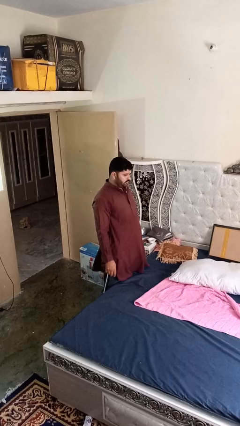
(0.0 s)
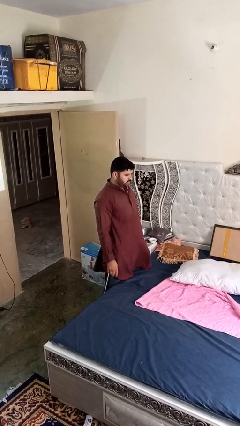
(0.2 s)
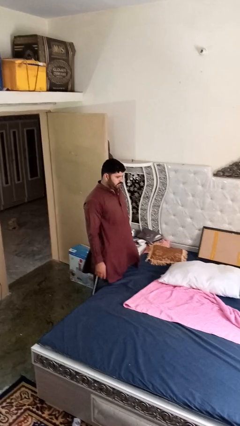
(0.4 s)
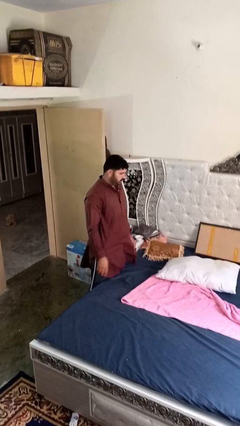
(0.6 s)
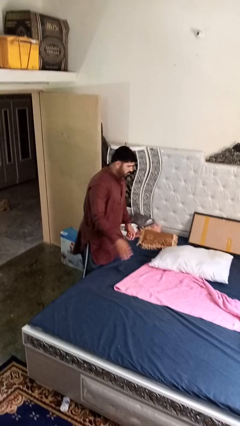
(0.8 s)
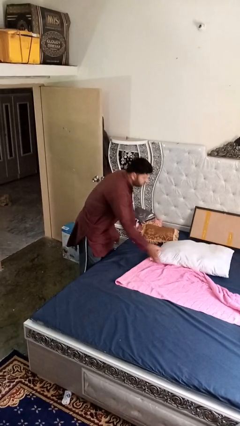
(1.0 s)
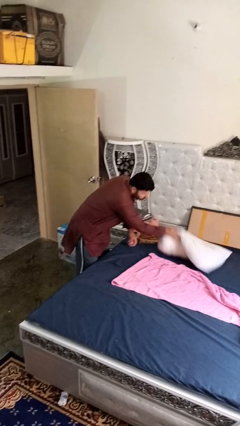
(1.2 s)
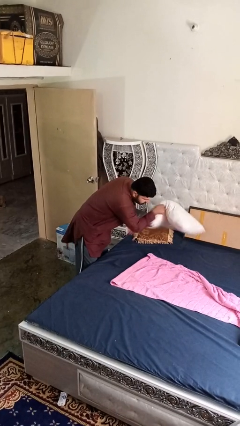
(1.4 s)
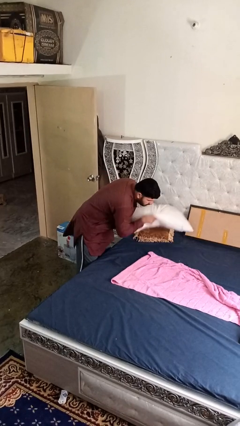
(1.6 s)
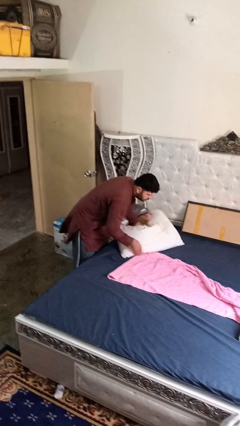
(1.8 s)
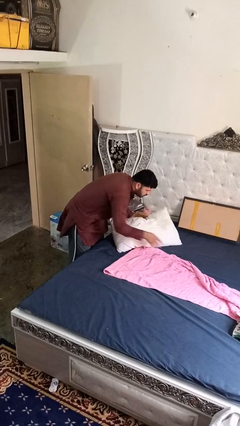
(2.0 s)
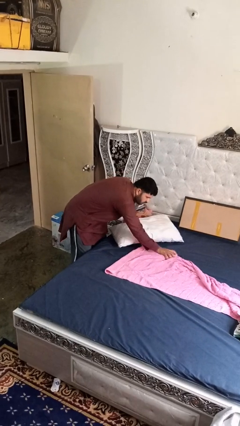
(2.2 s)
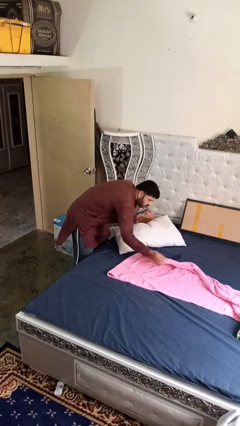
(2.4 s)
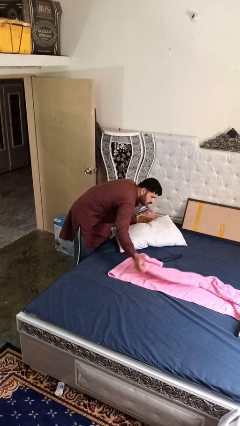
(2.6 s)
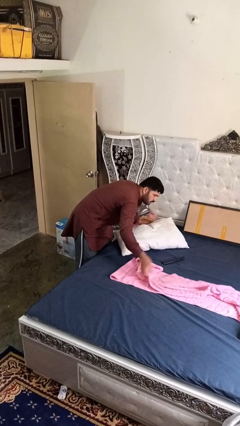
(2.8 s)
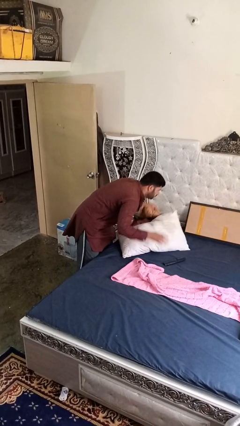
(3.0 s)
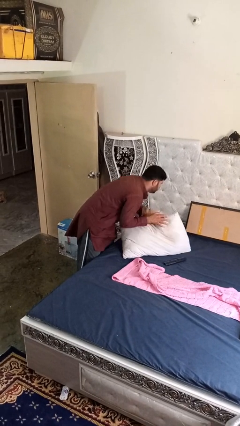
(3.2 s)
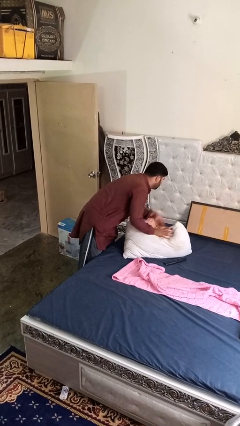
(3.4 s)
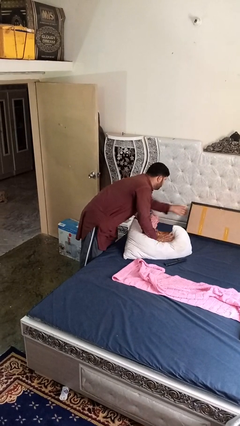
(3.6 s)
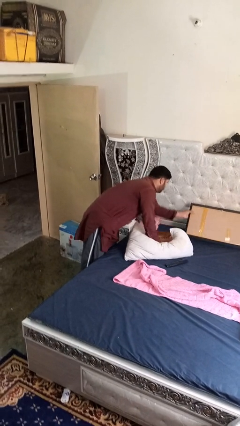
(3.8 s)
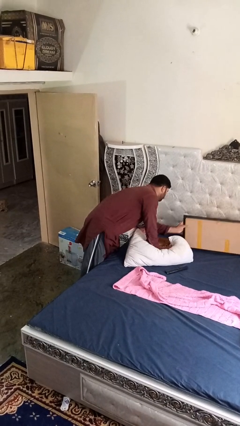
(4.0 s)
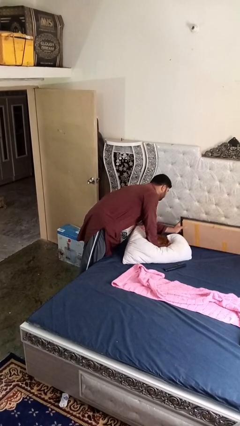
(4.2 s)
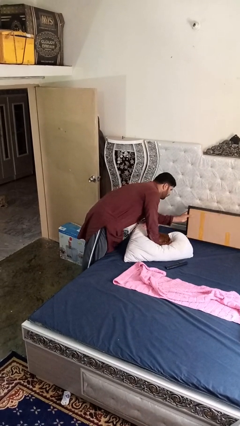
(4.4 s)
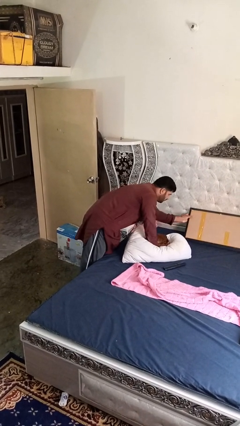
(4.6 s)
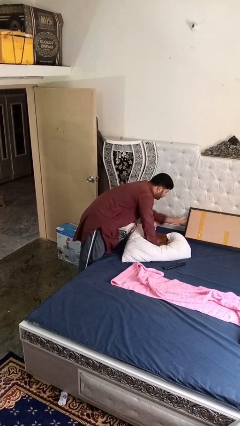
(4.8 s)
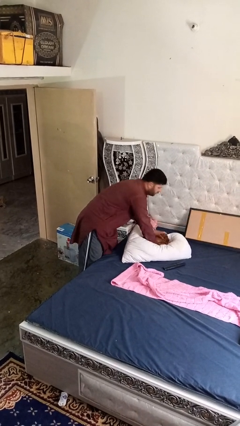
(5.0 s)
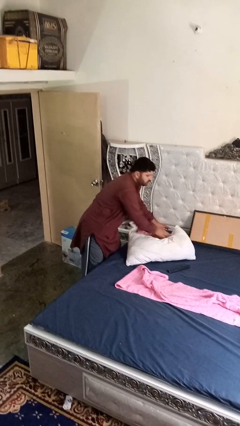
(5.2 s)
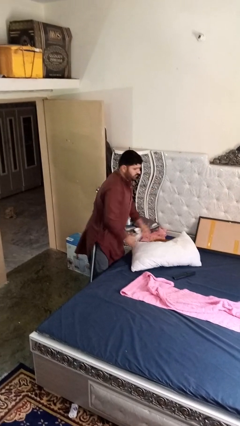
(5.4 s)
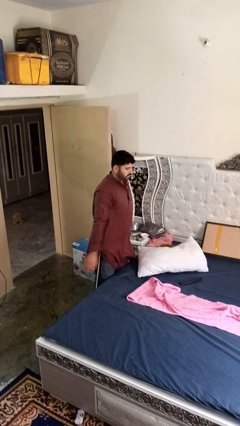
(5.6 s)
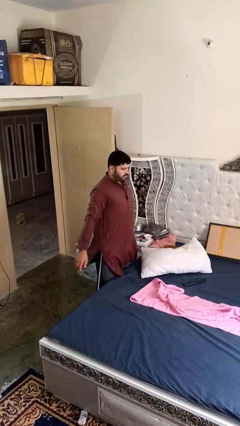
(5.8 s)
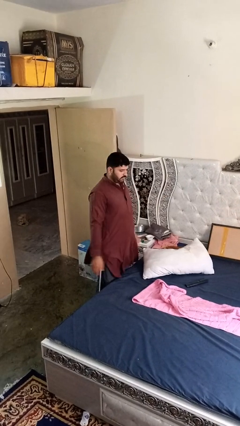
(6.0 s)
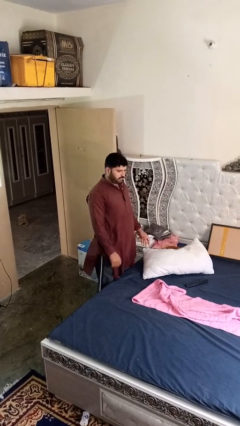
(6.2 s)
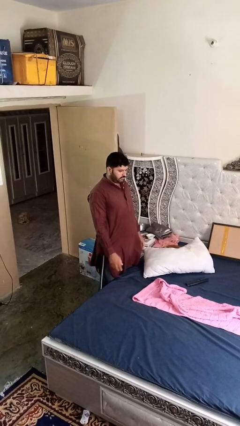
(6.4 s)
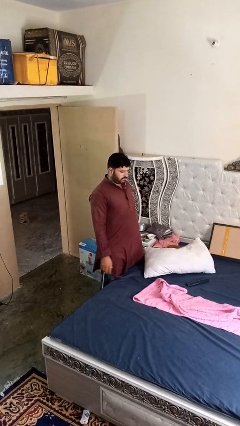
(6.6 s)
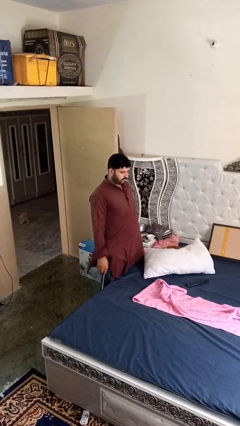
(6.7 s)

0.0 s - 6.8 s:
person searches under bed

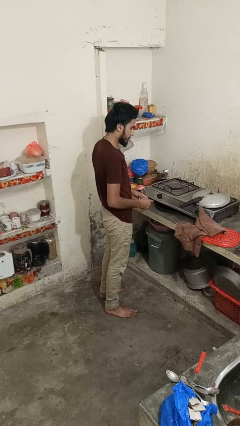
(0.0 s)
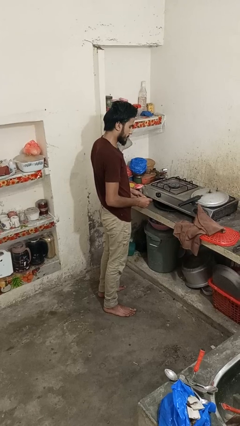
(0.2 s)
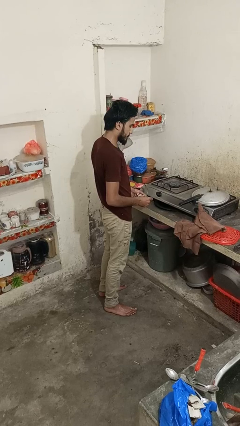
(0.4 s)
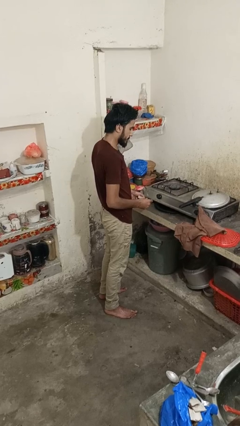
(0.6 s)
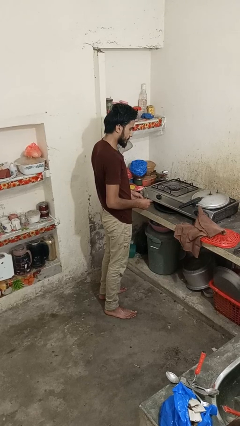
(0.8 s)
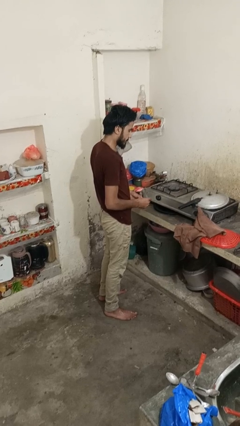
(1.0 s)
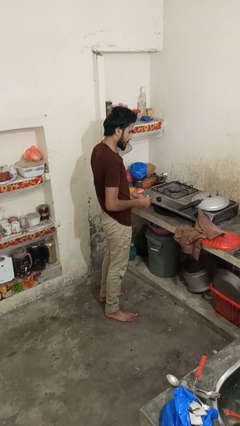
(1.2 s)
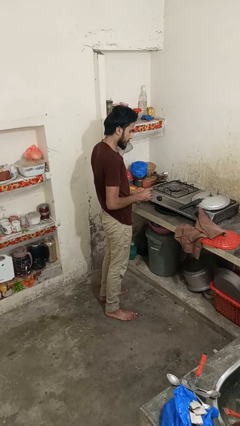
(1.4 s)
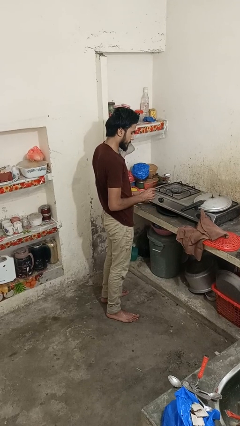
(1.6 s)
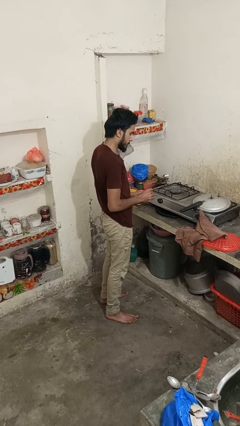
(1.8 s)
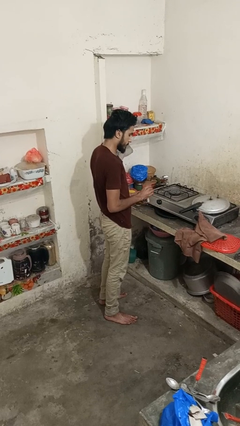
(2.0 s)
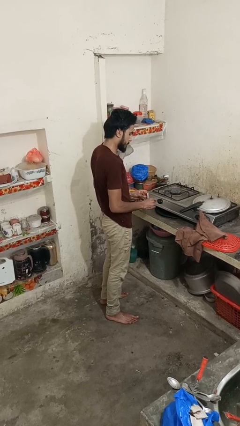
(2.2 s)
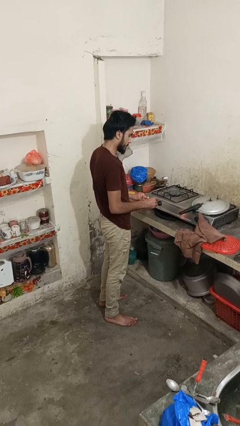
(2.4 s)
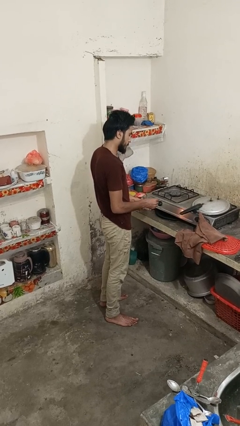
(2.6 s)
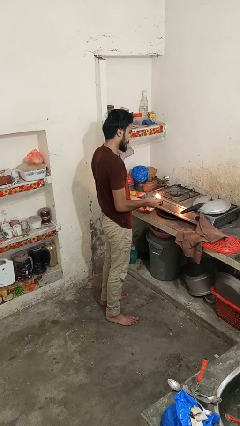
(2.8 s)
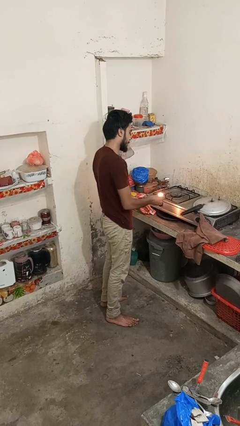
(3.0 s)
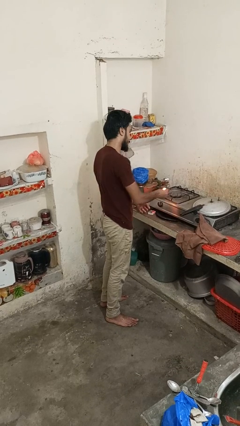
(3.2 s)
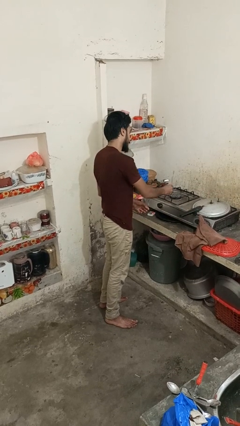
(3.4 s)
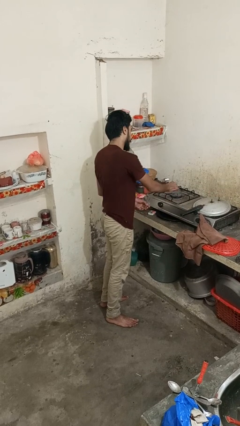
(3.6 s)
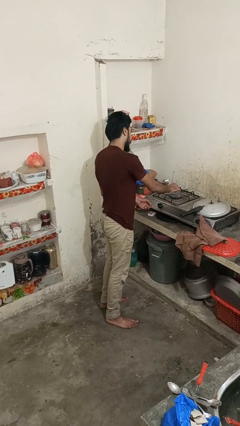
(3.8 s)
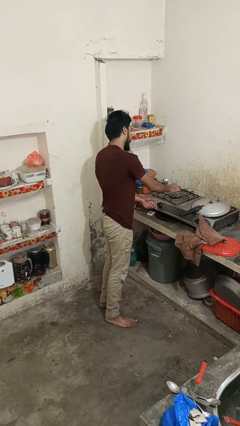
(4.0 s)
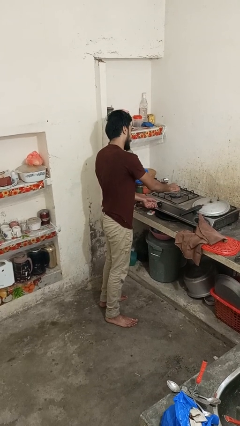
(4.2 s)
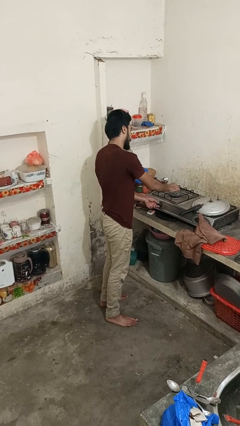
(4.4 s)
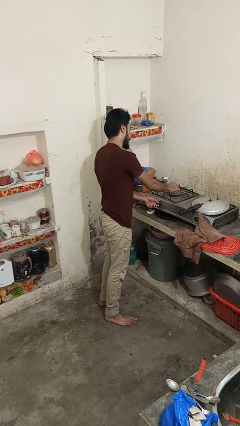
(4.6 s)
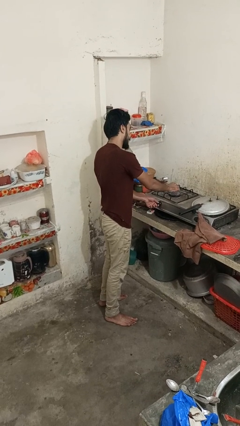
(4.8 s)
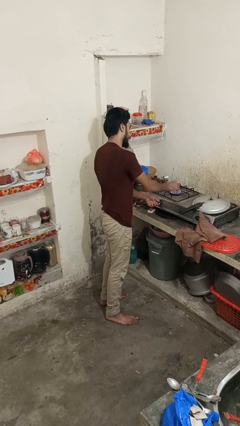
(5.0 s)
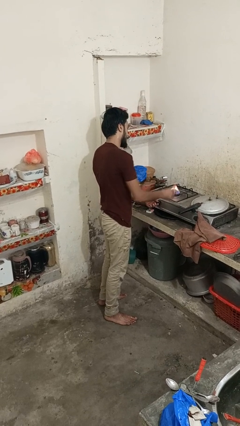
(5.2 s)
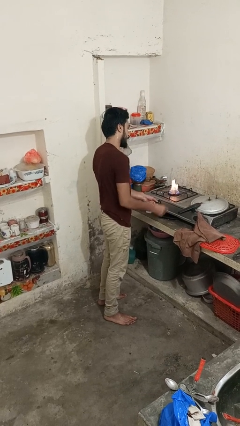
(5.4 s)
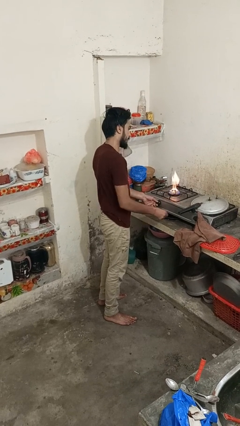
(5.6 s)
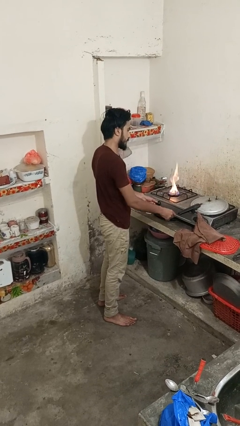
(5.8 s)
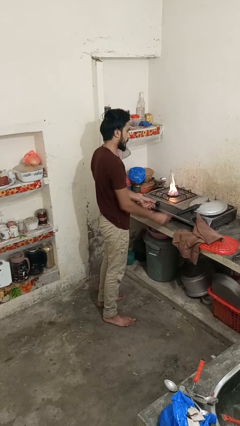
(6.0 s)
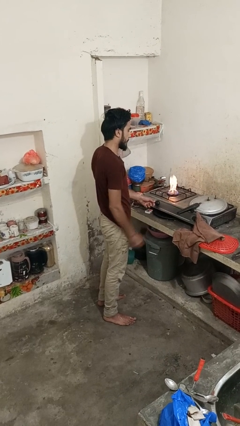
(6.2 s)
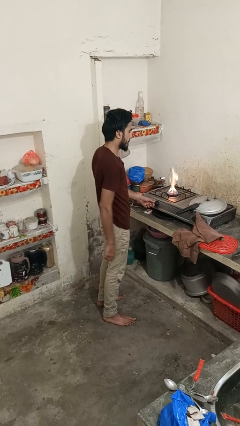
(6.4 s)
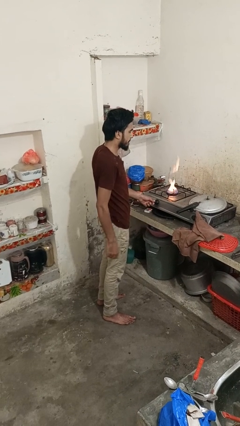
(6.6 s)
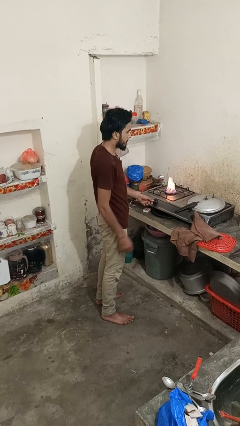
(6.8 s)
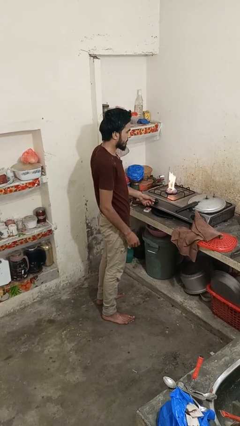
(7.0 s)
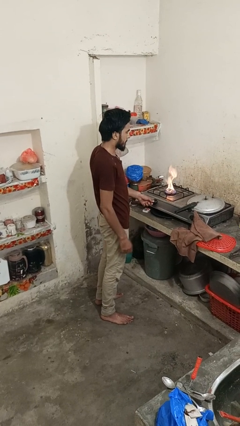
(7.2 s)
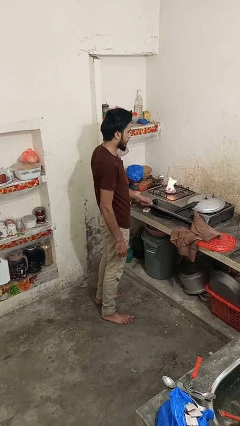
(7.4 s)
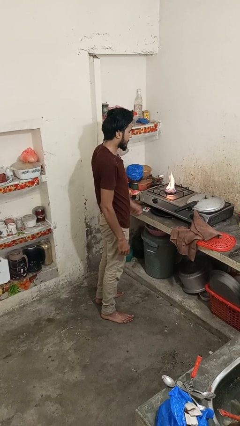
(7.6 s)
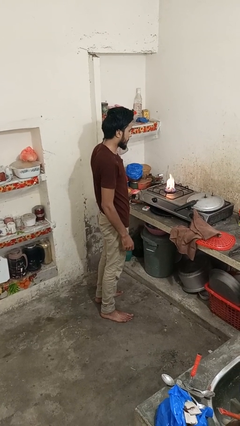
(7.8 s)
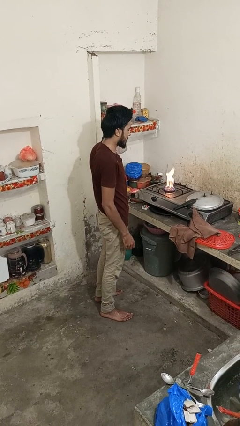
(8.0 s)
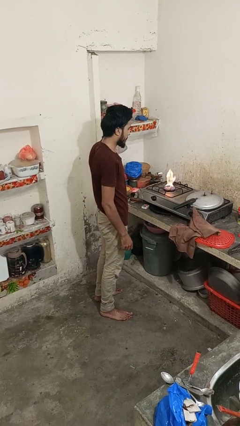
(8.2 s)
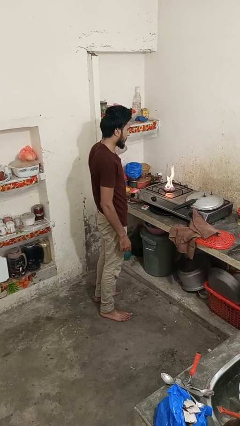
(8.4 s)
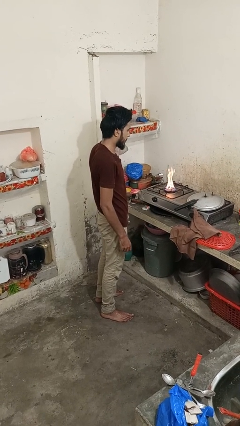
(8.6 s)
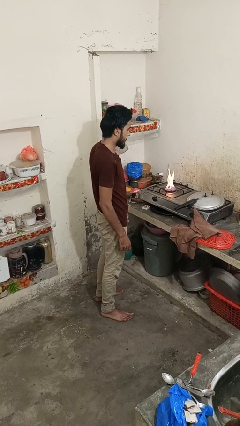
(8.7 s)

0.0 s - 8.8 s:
person turns on stovetop

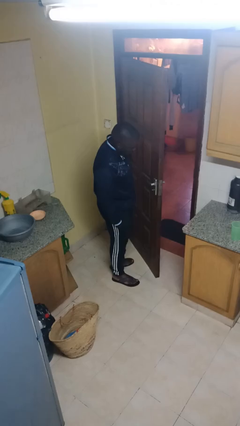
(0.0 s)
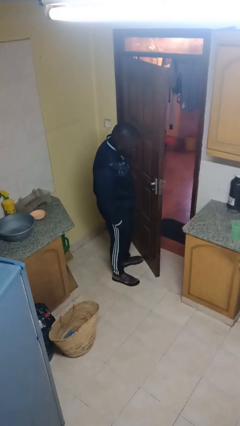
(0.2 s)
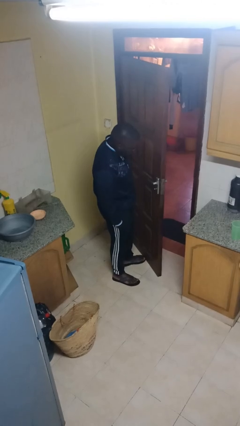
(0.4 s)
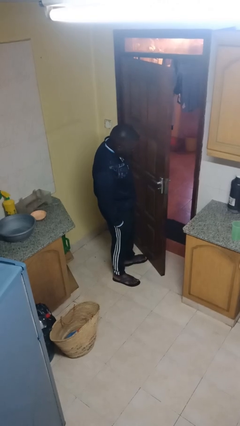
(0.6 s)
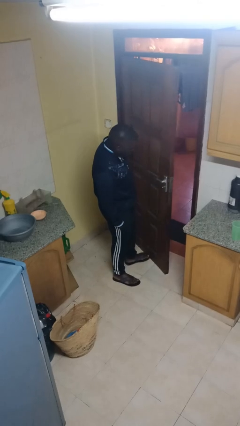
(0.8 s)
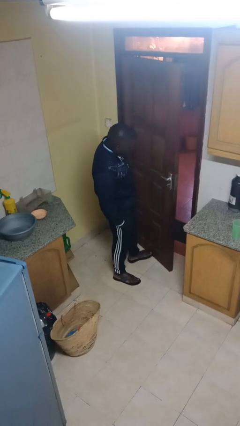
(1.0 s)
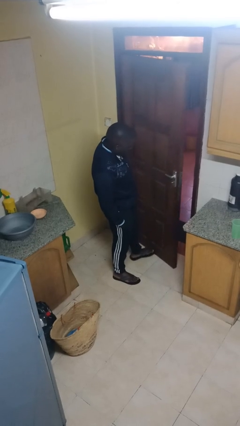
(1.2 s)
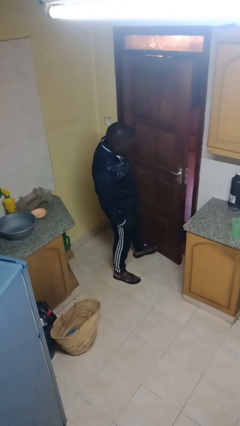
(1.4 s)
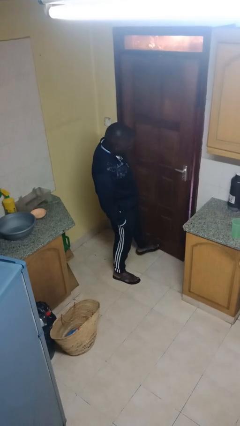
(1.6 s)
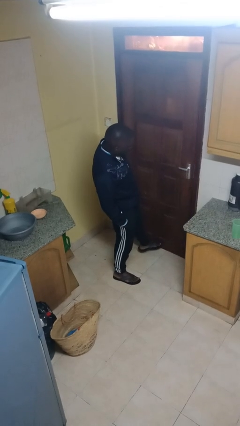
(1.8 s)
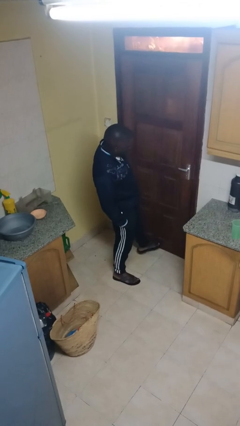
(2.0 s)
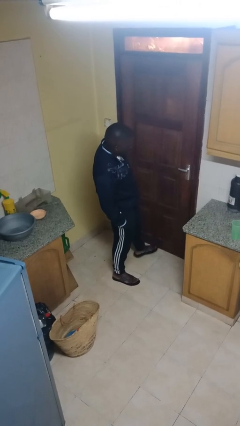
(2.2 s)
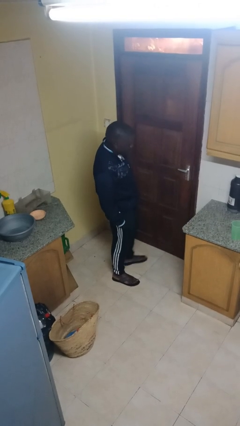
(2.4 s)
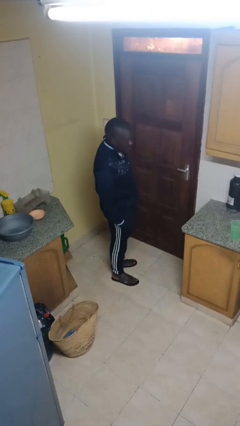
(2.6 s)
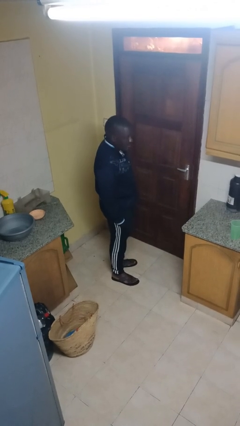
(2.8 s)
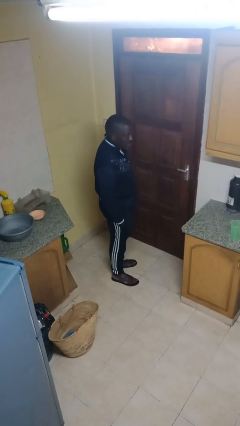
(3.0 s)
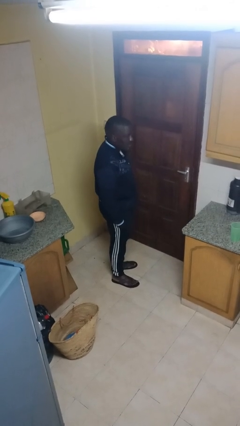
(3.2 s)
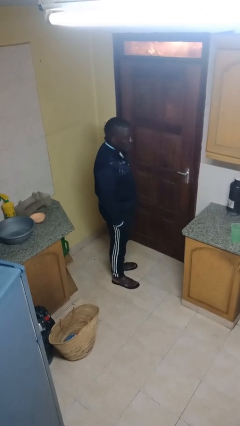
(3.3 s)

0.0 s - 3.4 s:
person closes door with foot
